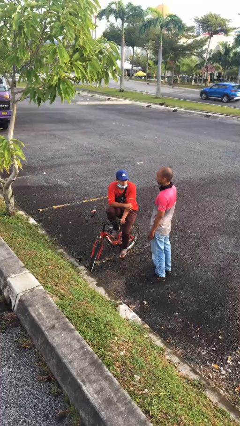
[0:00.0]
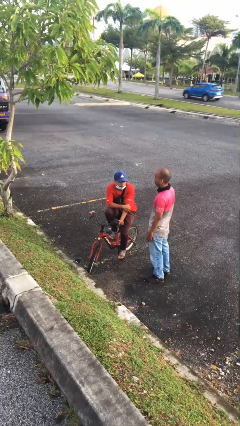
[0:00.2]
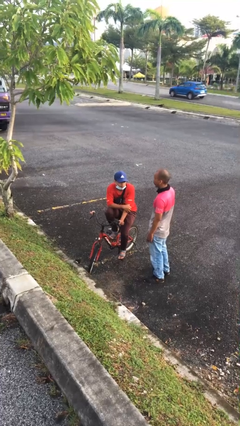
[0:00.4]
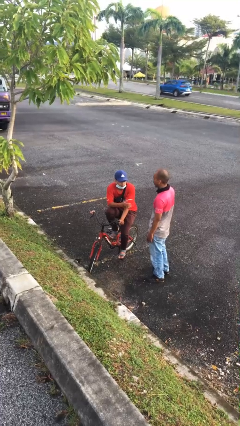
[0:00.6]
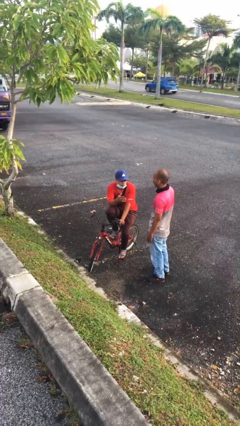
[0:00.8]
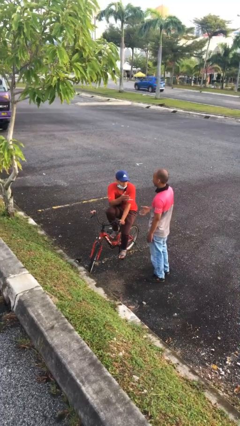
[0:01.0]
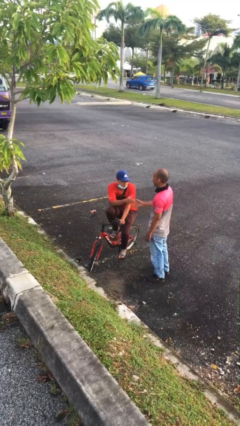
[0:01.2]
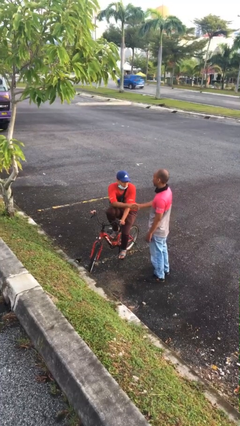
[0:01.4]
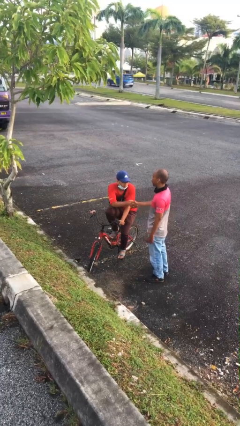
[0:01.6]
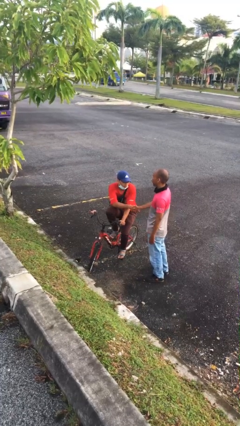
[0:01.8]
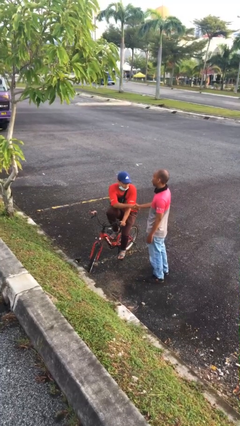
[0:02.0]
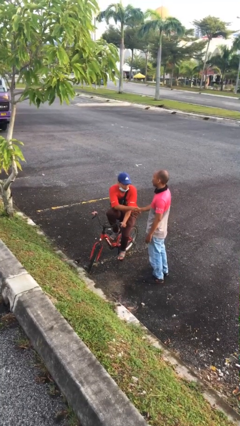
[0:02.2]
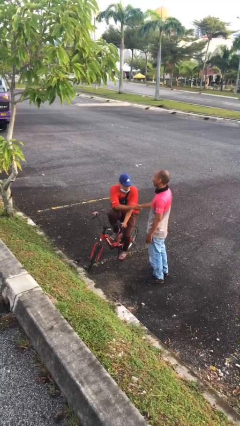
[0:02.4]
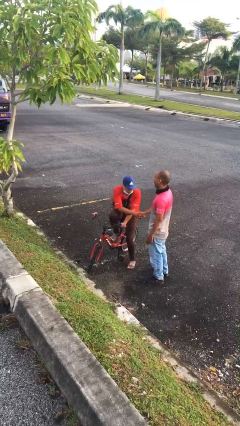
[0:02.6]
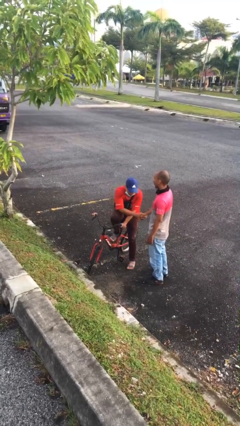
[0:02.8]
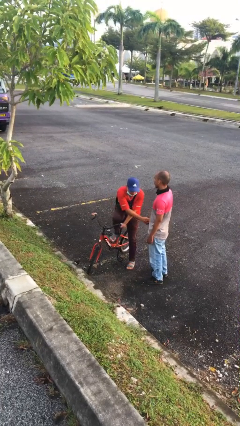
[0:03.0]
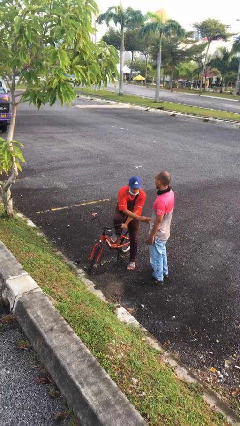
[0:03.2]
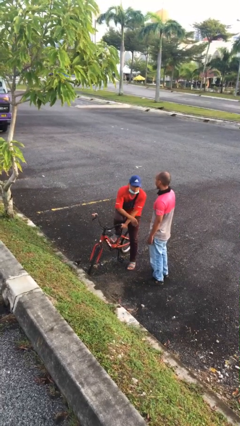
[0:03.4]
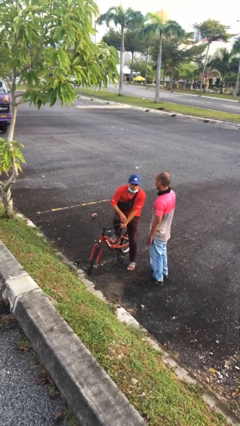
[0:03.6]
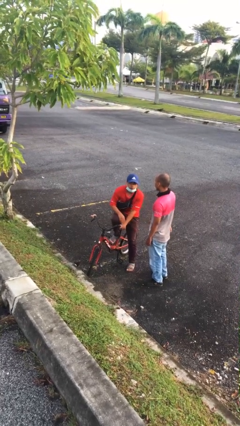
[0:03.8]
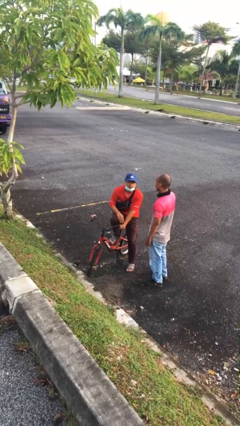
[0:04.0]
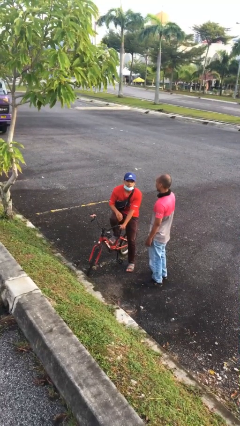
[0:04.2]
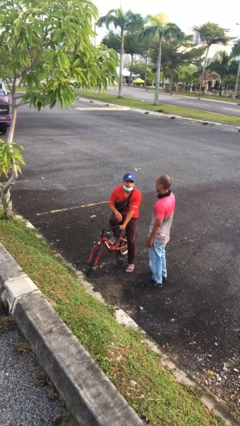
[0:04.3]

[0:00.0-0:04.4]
person shakes hand

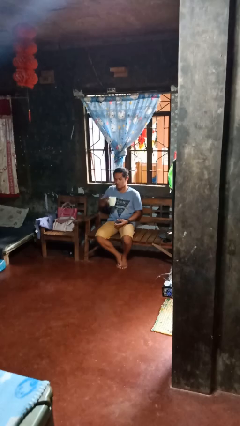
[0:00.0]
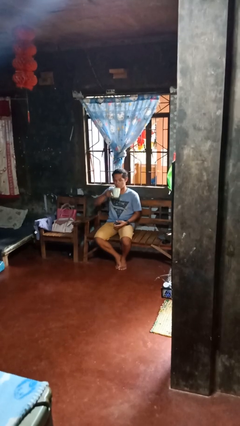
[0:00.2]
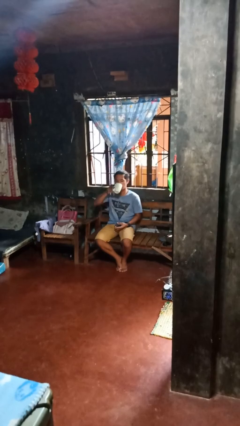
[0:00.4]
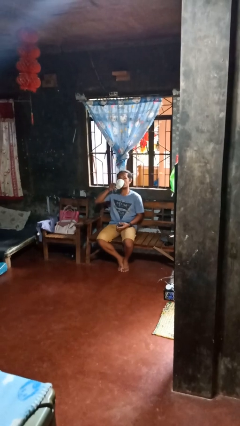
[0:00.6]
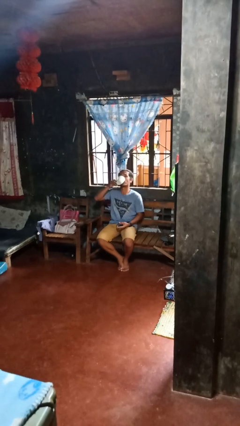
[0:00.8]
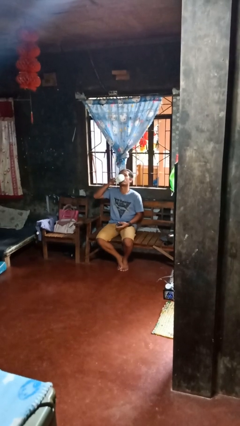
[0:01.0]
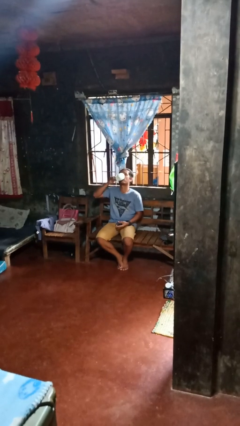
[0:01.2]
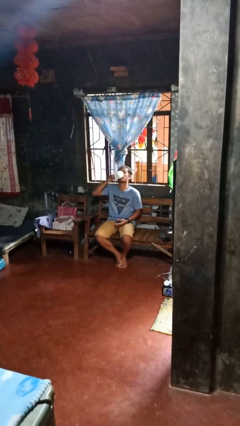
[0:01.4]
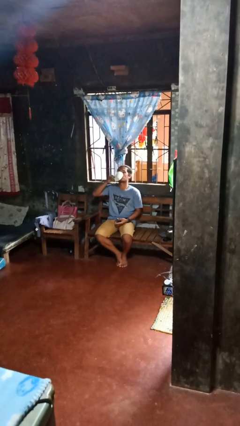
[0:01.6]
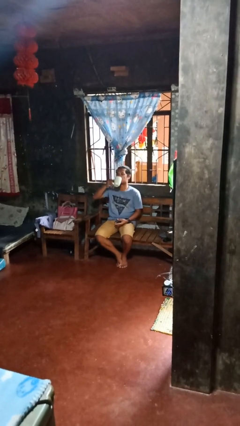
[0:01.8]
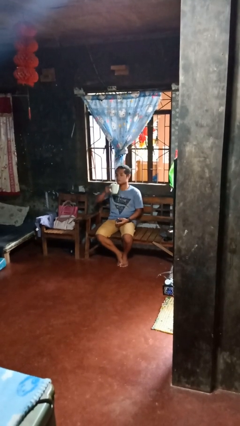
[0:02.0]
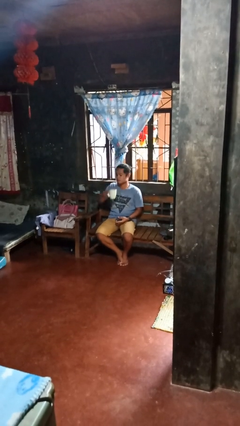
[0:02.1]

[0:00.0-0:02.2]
person drinks from cup

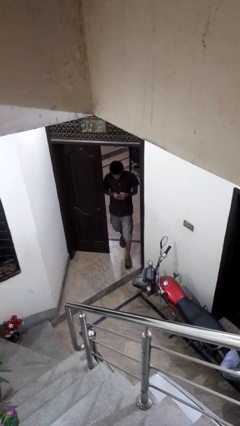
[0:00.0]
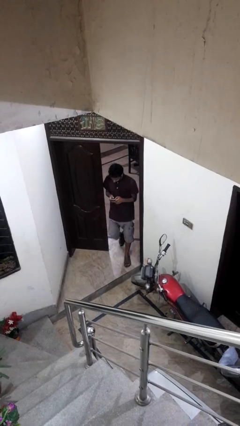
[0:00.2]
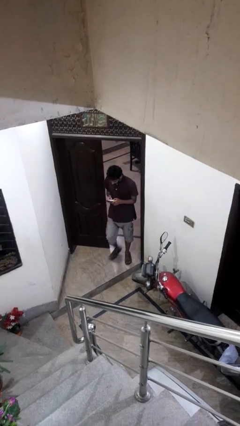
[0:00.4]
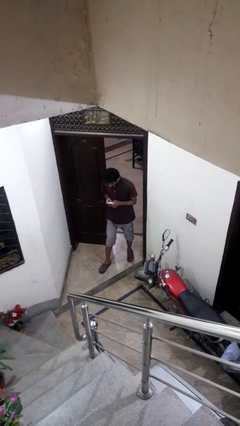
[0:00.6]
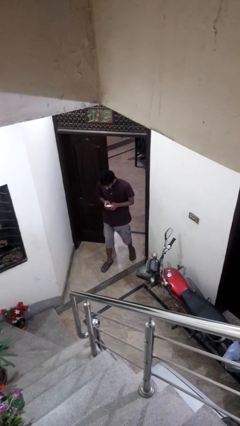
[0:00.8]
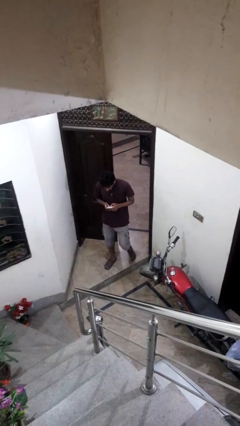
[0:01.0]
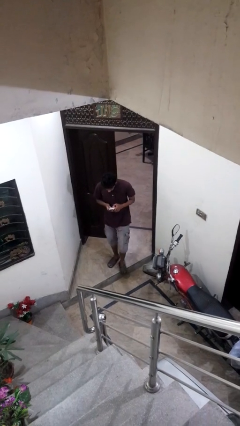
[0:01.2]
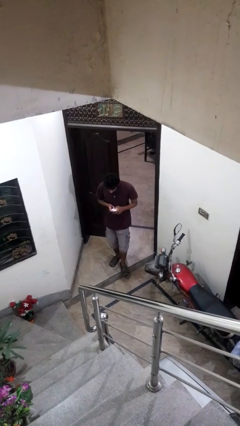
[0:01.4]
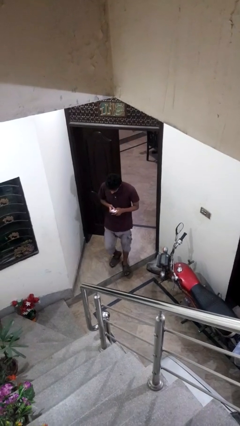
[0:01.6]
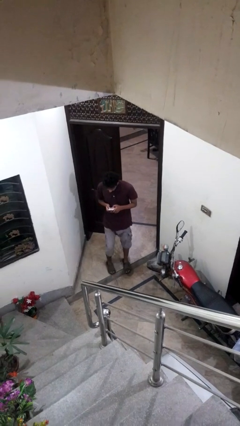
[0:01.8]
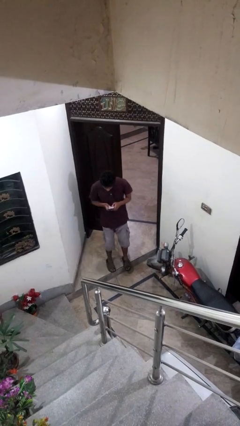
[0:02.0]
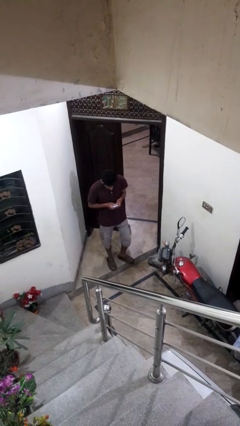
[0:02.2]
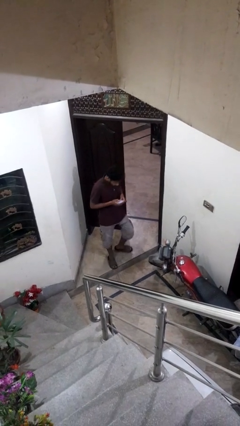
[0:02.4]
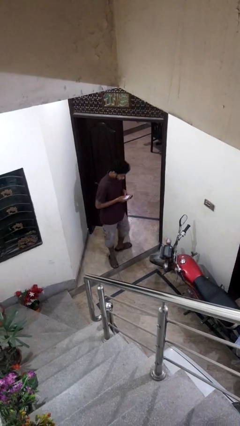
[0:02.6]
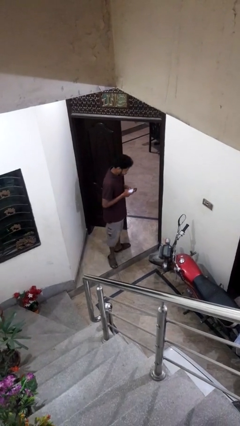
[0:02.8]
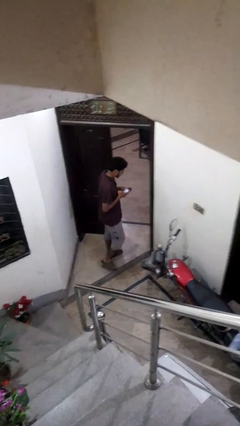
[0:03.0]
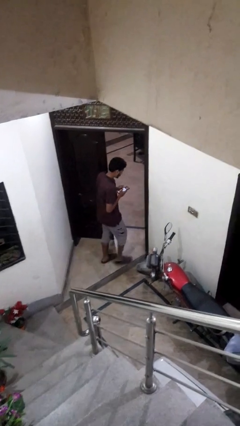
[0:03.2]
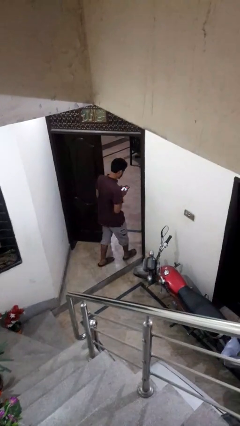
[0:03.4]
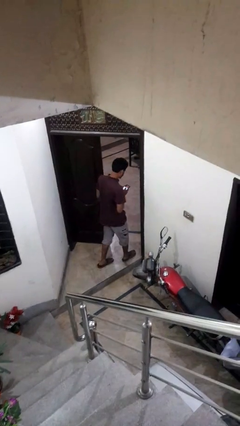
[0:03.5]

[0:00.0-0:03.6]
person enters scene through structure

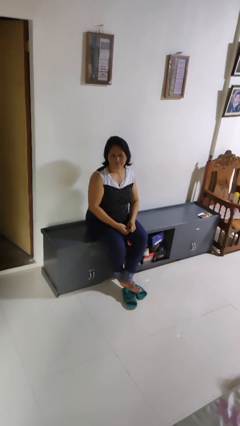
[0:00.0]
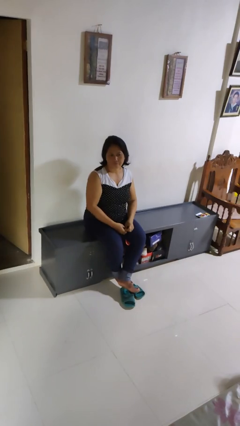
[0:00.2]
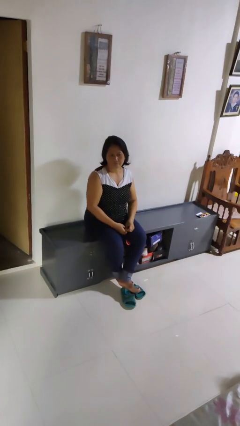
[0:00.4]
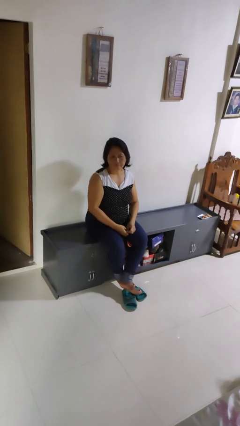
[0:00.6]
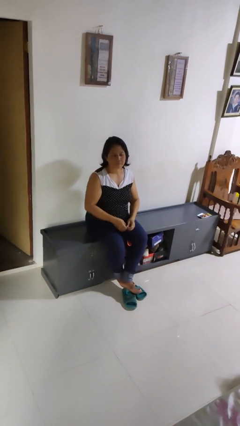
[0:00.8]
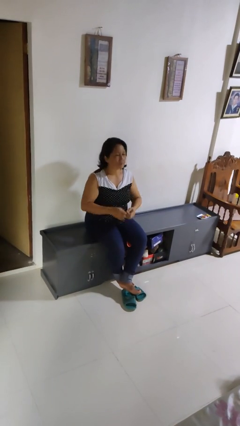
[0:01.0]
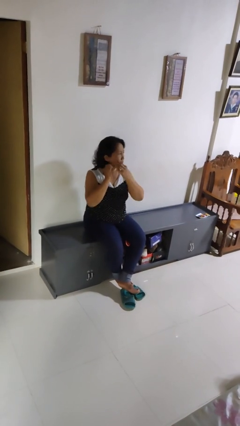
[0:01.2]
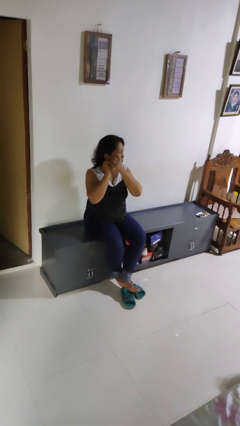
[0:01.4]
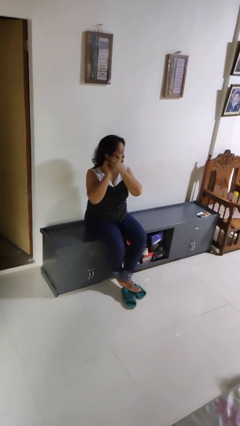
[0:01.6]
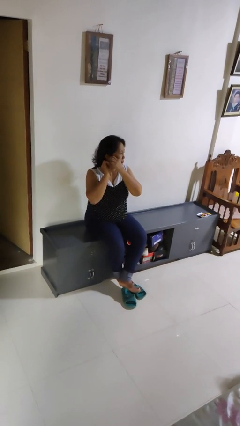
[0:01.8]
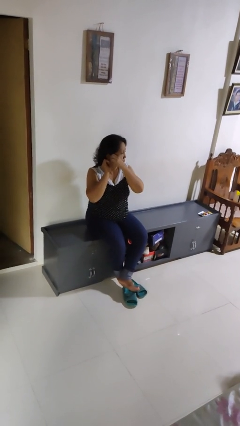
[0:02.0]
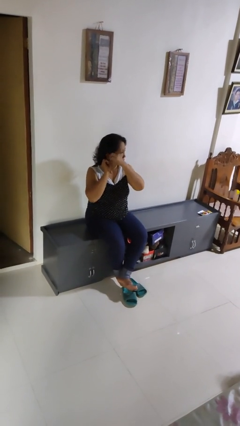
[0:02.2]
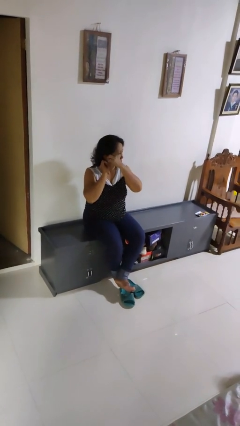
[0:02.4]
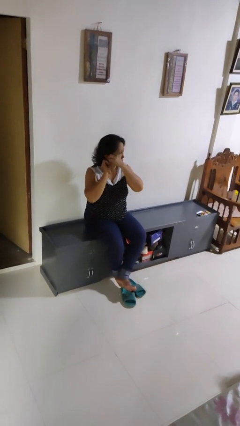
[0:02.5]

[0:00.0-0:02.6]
person puts on earrings

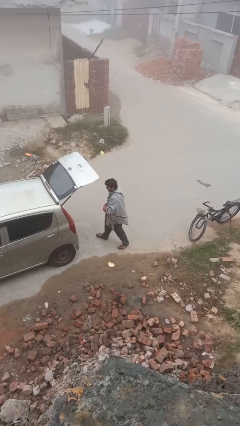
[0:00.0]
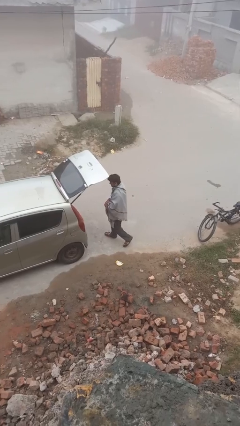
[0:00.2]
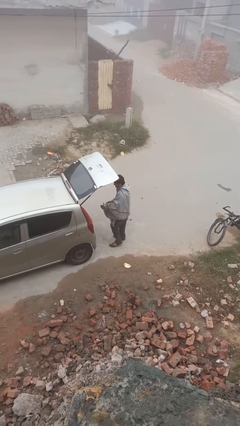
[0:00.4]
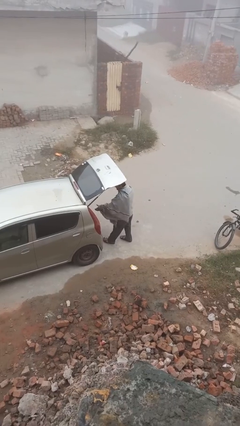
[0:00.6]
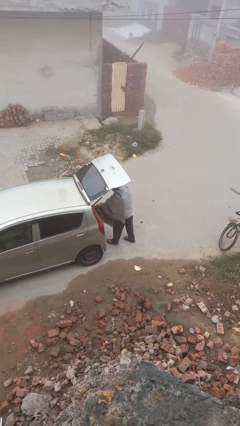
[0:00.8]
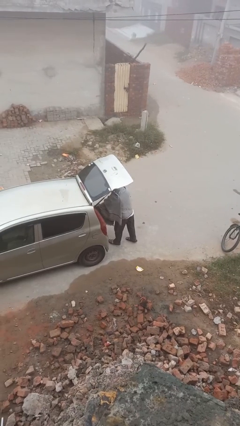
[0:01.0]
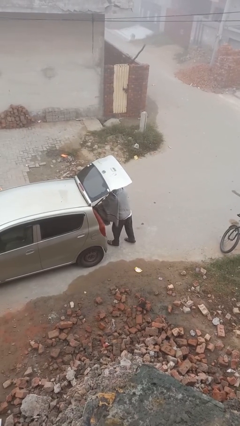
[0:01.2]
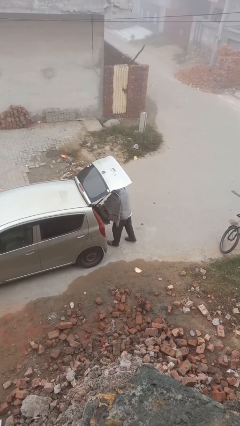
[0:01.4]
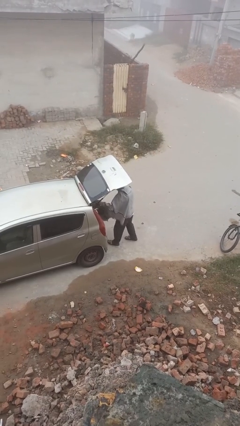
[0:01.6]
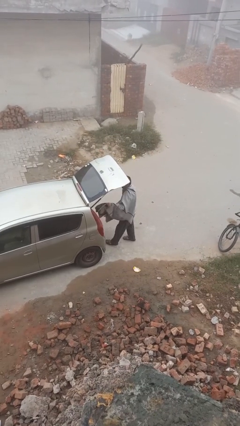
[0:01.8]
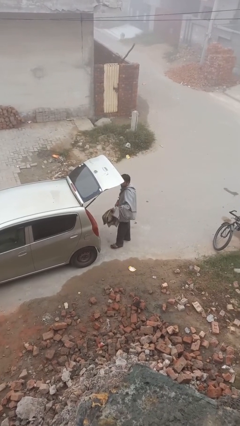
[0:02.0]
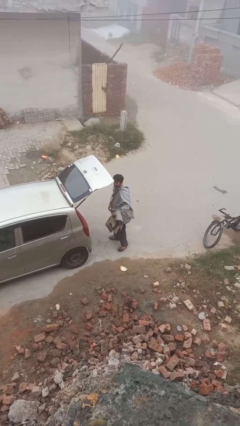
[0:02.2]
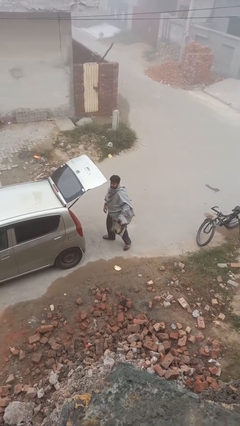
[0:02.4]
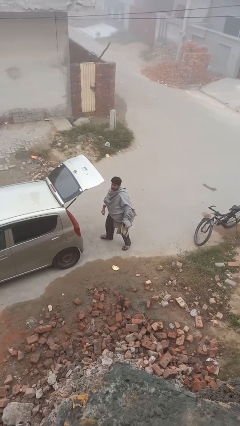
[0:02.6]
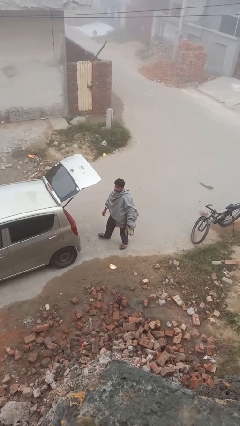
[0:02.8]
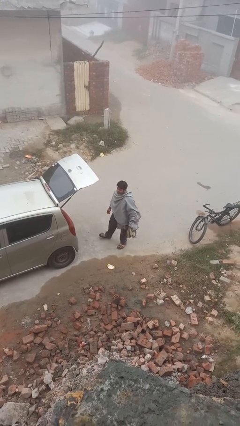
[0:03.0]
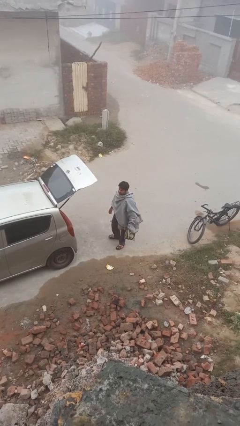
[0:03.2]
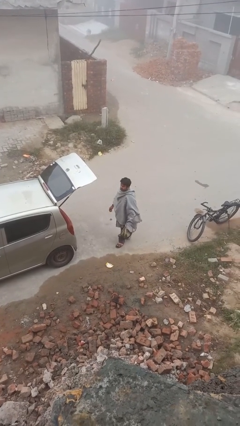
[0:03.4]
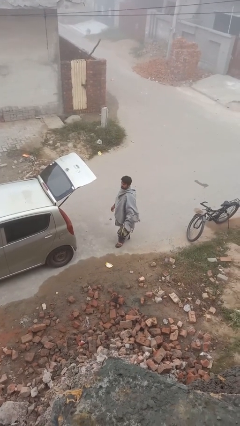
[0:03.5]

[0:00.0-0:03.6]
person unloads car

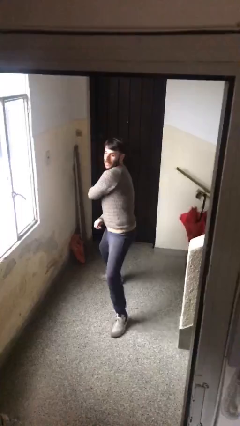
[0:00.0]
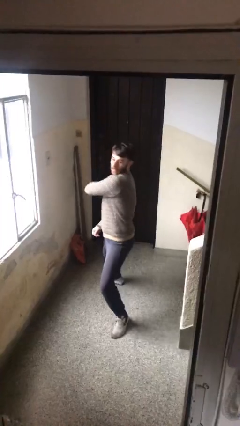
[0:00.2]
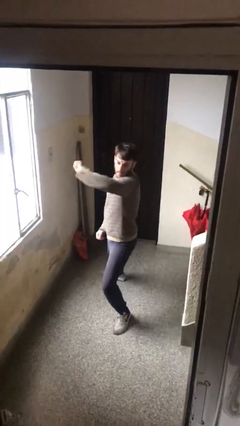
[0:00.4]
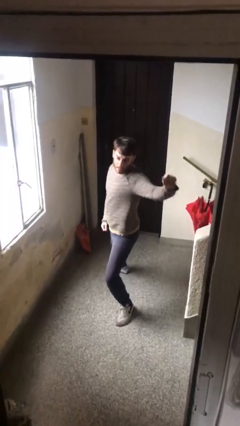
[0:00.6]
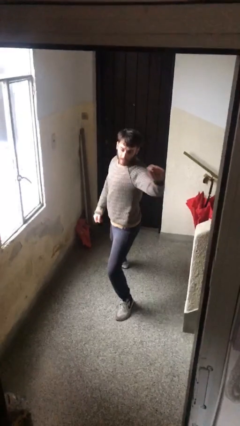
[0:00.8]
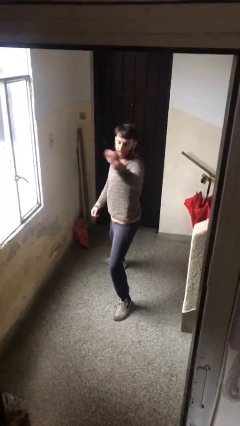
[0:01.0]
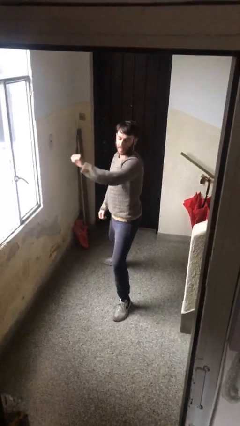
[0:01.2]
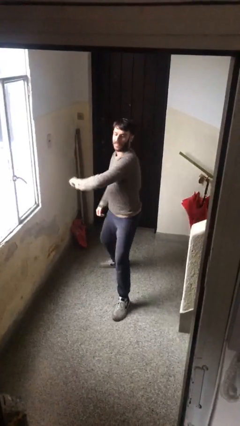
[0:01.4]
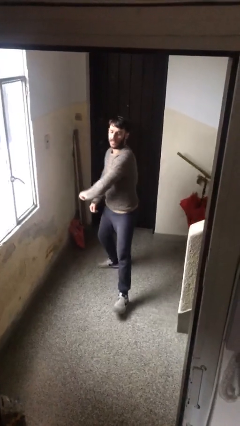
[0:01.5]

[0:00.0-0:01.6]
person karate chop
